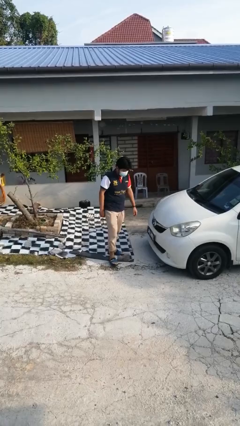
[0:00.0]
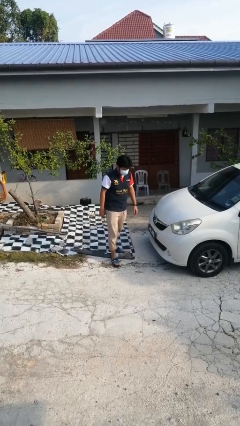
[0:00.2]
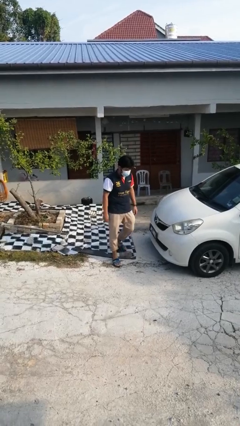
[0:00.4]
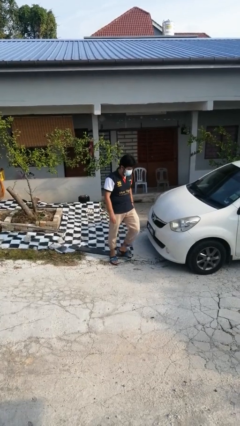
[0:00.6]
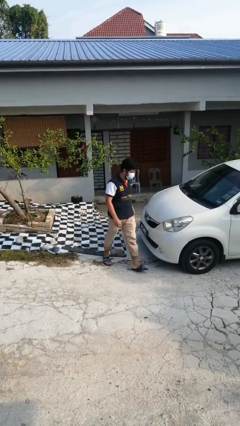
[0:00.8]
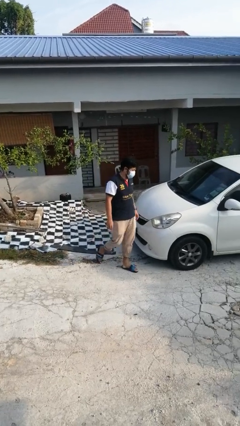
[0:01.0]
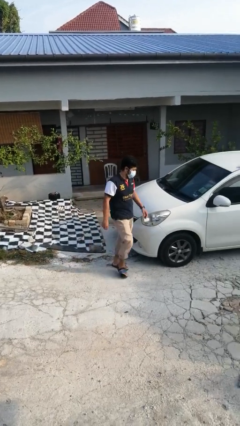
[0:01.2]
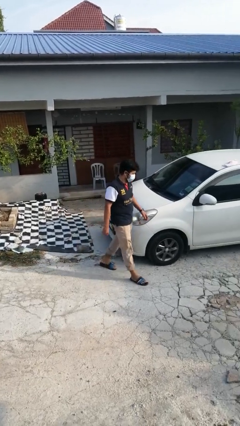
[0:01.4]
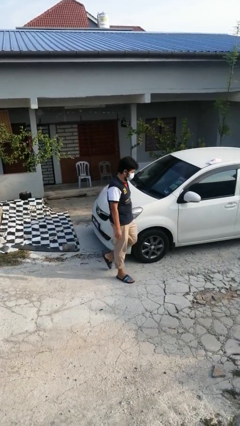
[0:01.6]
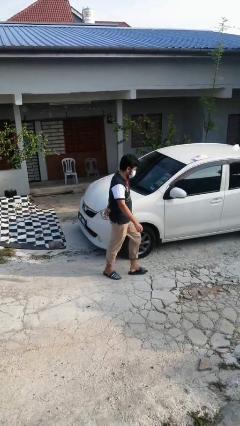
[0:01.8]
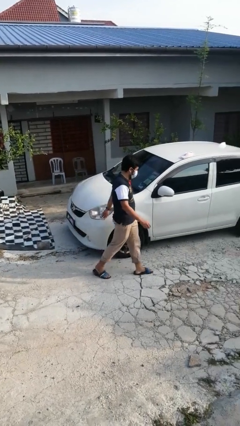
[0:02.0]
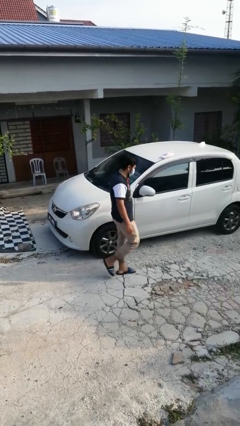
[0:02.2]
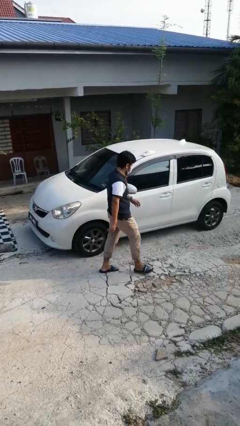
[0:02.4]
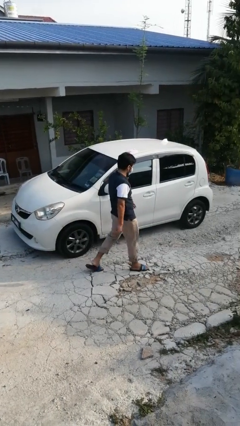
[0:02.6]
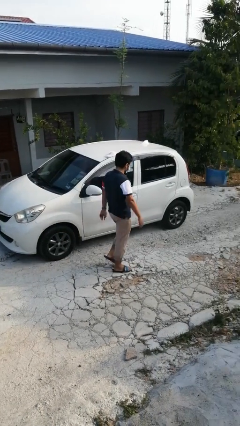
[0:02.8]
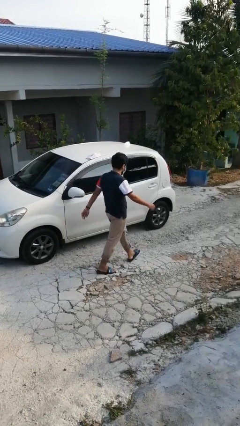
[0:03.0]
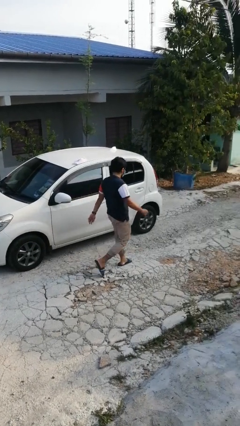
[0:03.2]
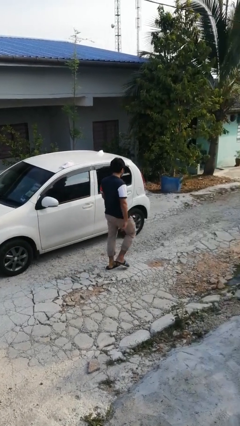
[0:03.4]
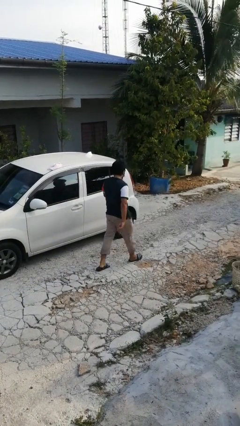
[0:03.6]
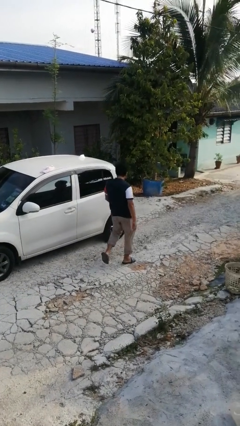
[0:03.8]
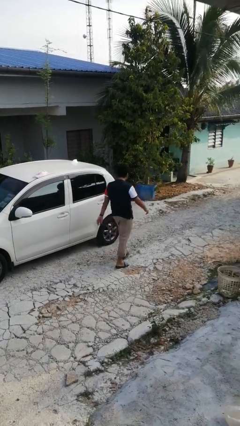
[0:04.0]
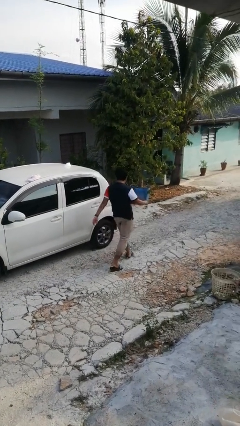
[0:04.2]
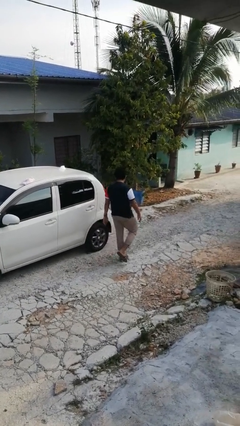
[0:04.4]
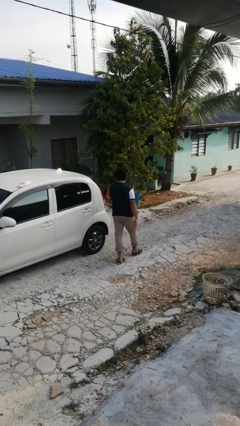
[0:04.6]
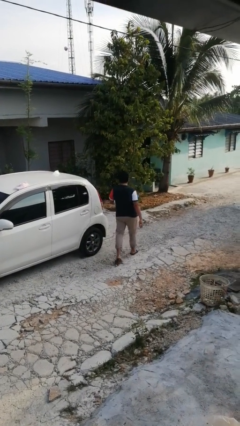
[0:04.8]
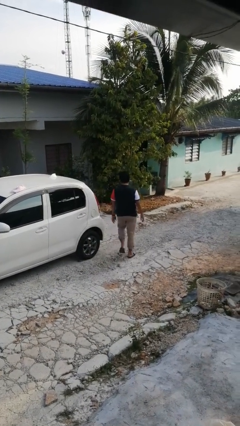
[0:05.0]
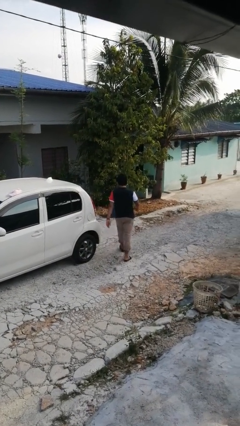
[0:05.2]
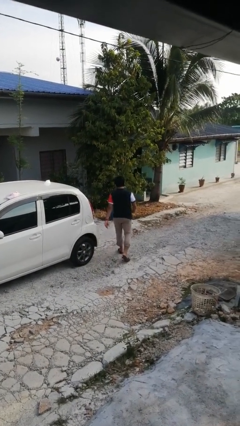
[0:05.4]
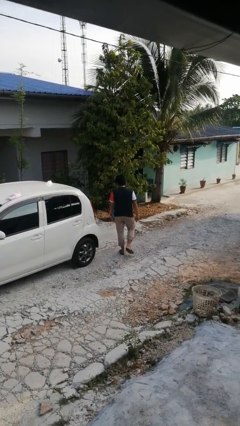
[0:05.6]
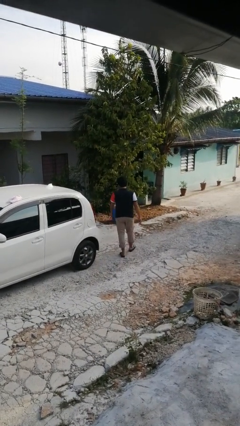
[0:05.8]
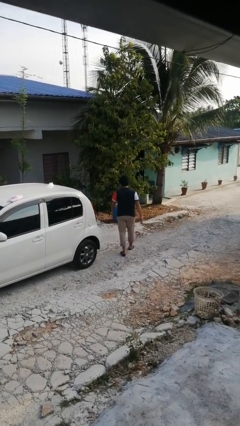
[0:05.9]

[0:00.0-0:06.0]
person walks around car

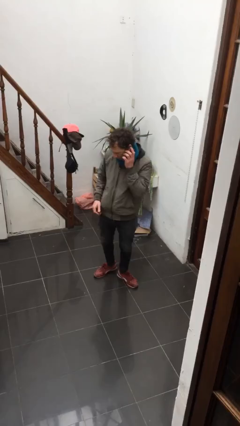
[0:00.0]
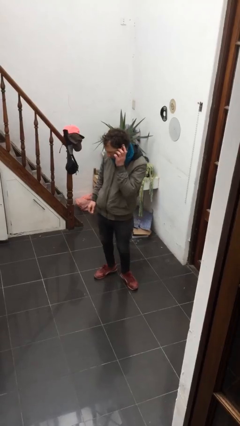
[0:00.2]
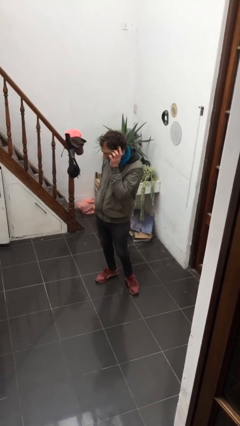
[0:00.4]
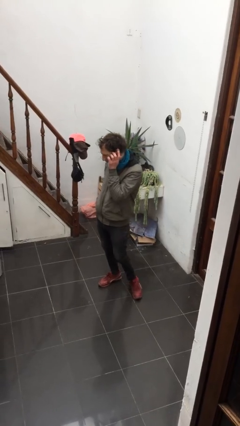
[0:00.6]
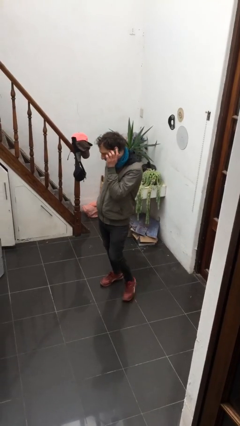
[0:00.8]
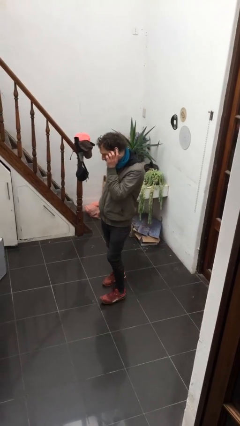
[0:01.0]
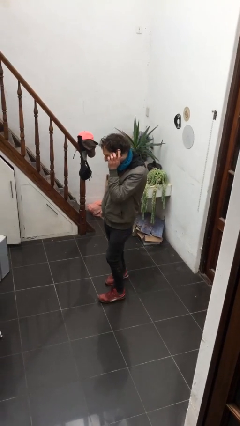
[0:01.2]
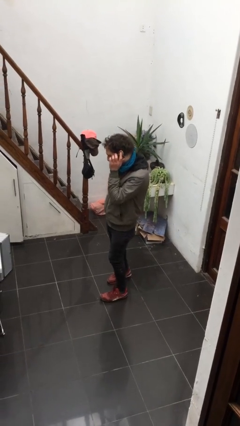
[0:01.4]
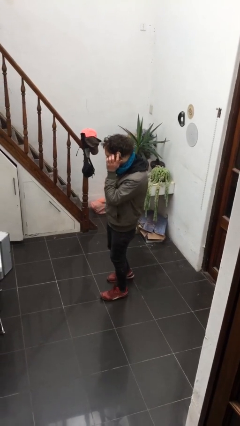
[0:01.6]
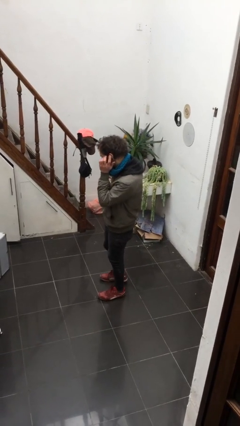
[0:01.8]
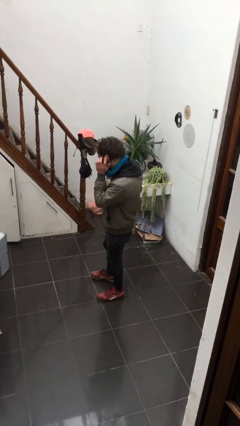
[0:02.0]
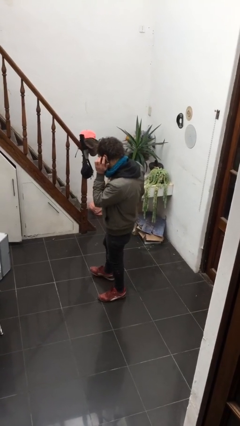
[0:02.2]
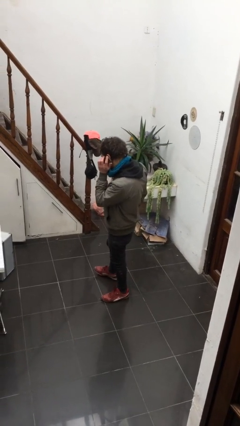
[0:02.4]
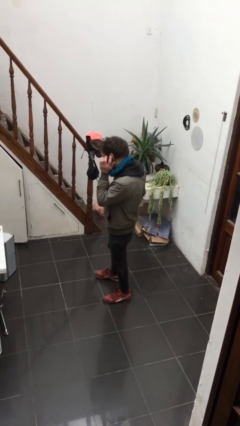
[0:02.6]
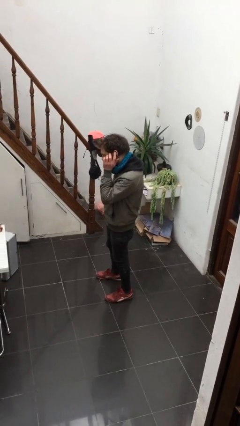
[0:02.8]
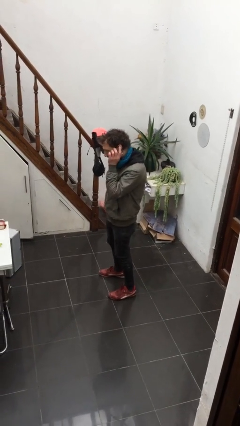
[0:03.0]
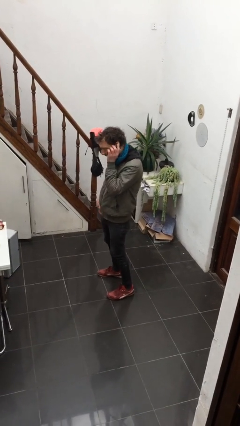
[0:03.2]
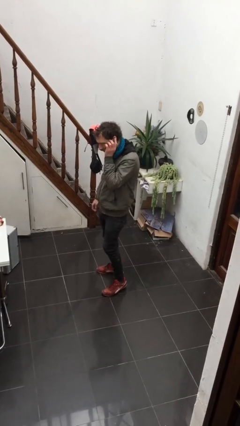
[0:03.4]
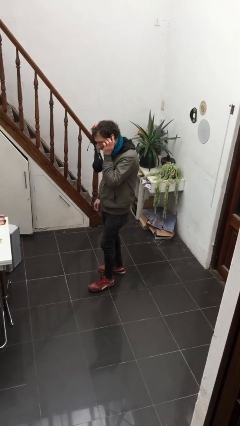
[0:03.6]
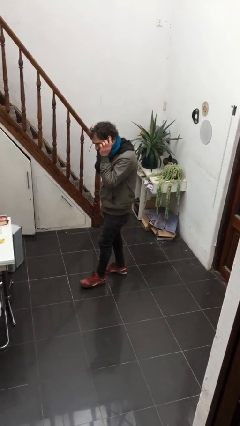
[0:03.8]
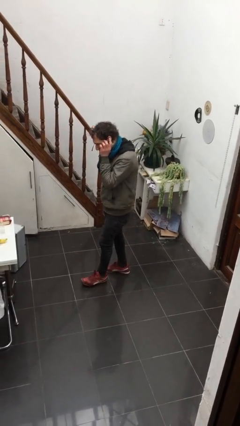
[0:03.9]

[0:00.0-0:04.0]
person talks on phone

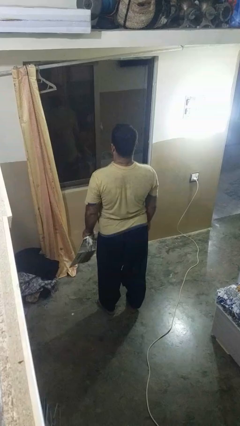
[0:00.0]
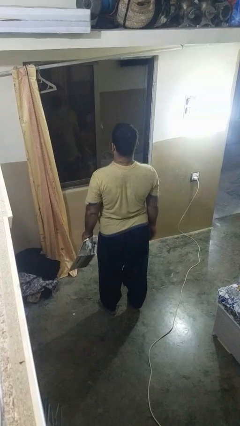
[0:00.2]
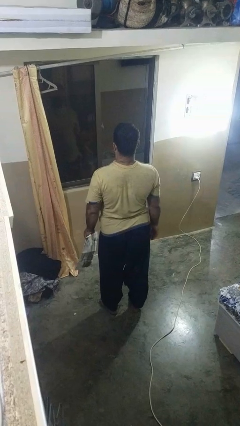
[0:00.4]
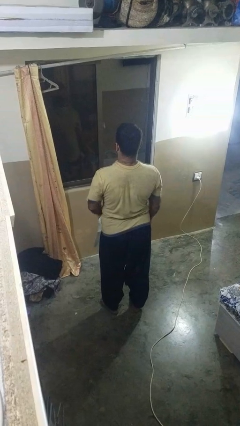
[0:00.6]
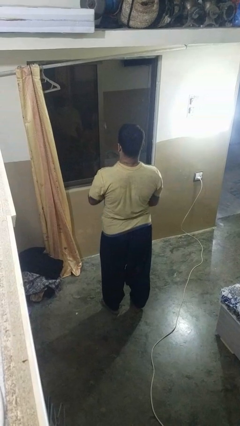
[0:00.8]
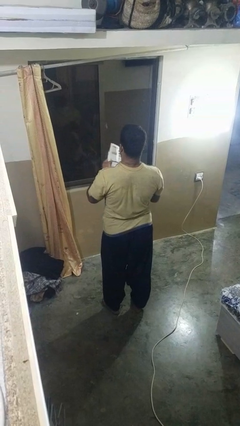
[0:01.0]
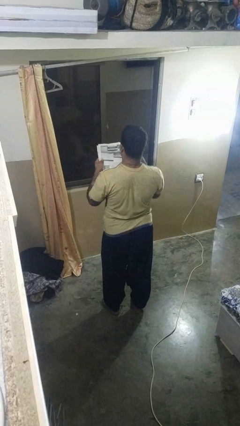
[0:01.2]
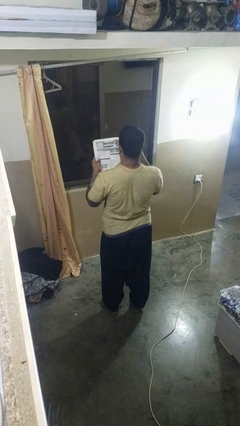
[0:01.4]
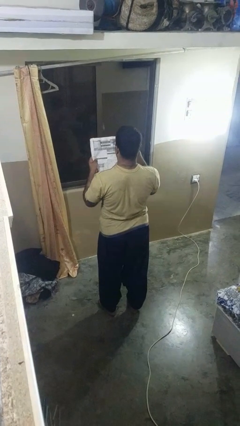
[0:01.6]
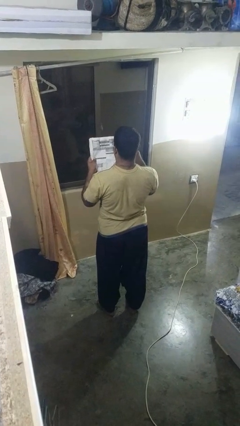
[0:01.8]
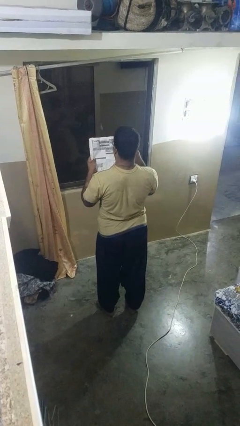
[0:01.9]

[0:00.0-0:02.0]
person reads newspaper

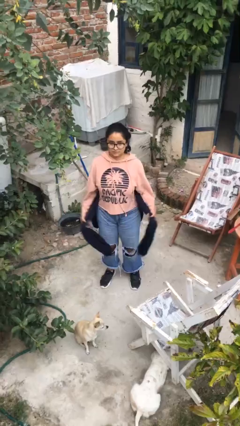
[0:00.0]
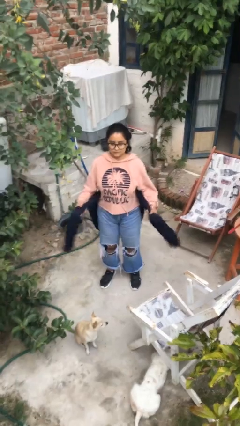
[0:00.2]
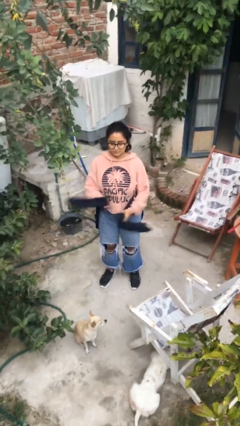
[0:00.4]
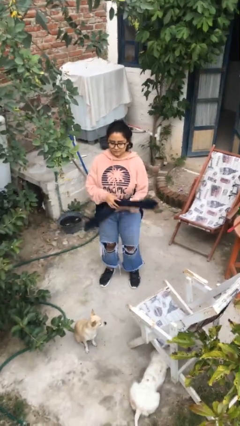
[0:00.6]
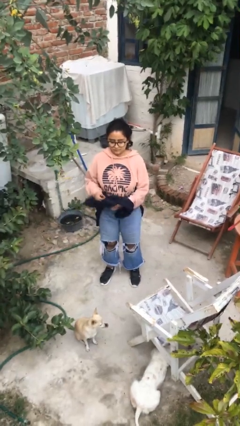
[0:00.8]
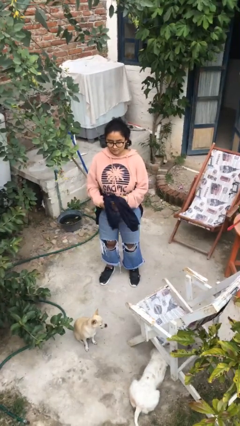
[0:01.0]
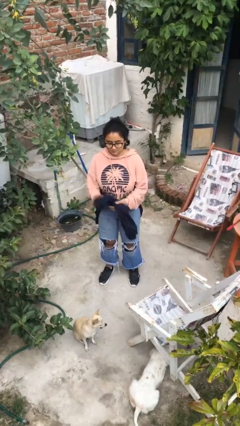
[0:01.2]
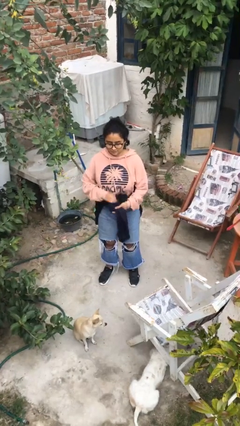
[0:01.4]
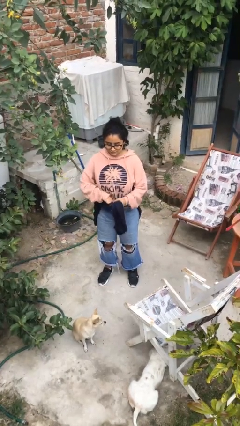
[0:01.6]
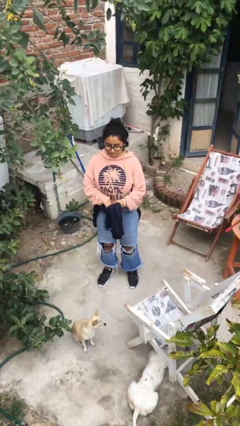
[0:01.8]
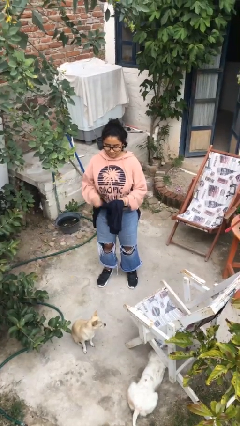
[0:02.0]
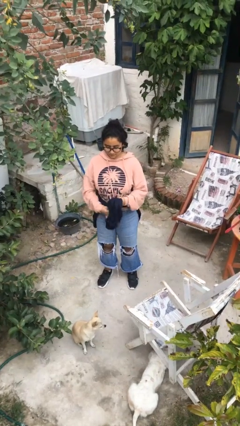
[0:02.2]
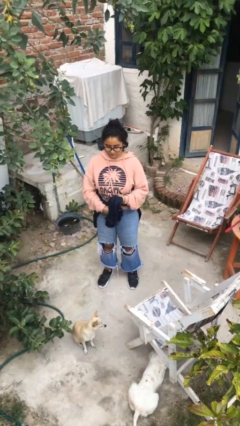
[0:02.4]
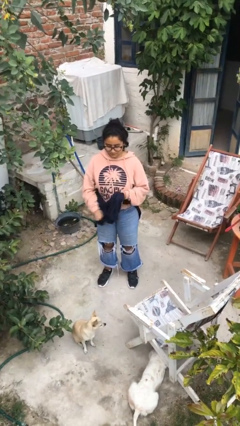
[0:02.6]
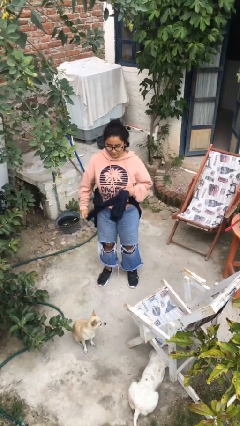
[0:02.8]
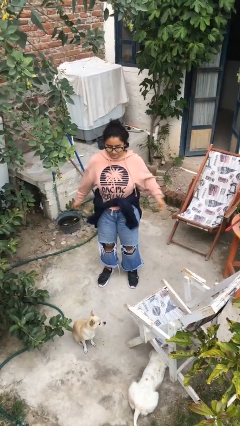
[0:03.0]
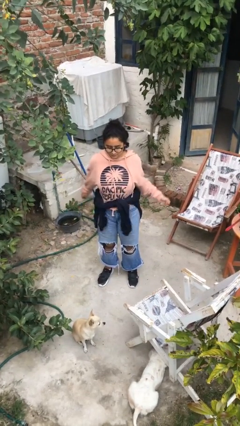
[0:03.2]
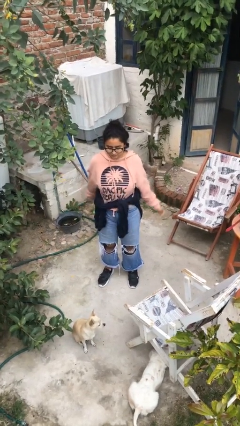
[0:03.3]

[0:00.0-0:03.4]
person ties jacket around waist

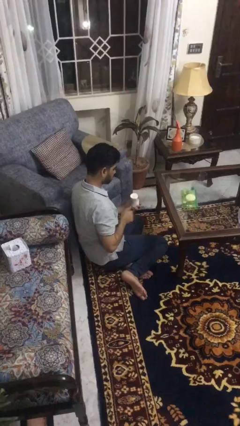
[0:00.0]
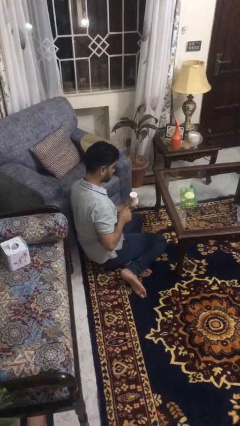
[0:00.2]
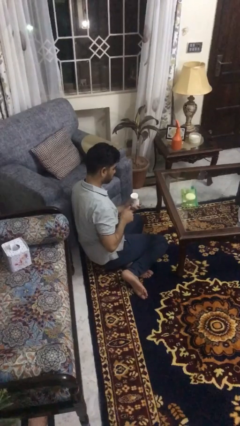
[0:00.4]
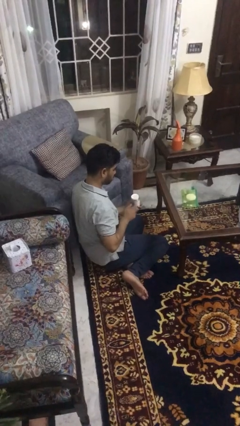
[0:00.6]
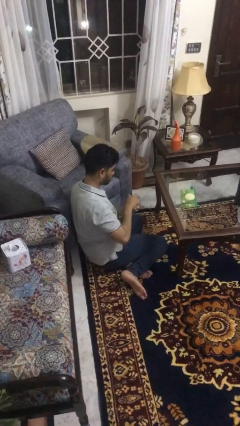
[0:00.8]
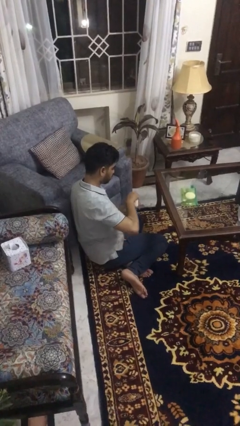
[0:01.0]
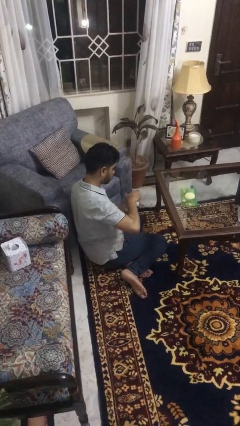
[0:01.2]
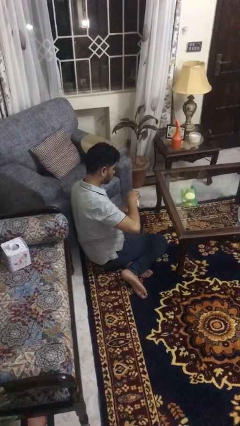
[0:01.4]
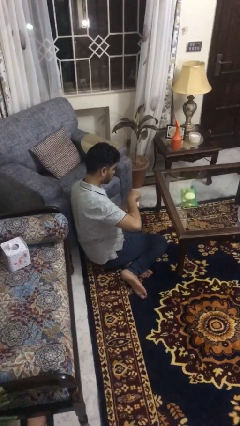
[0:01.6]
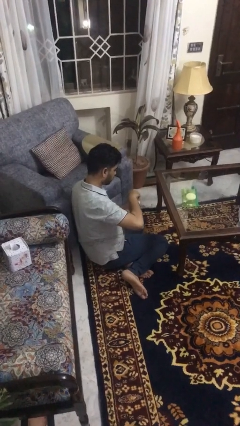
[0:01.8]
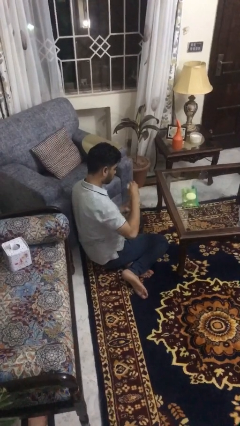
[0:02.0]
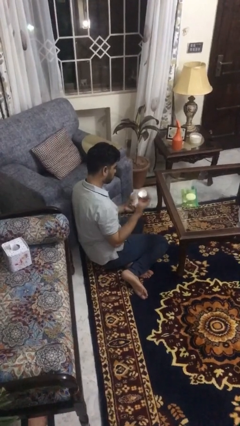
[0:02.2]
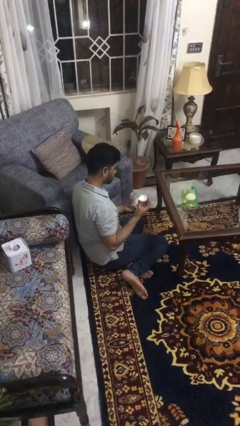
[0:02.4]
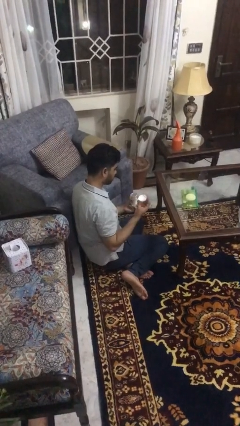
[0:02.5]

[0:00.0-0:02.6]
person opens jar
